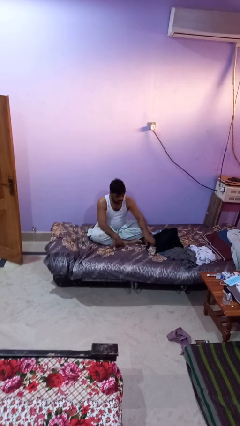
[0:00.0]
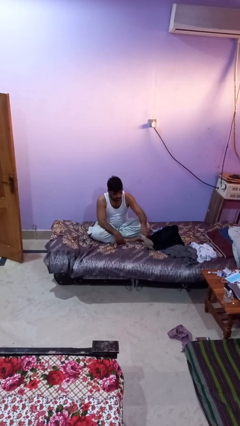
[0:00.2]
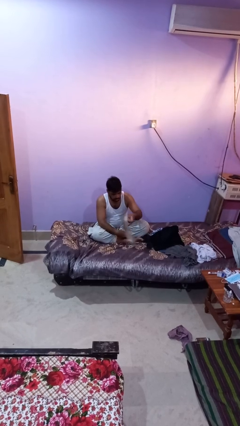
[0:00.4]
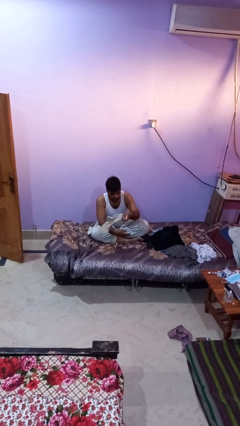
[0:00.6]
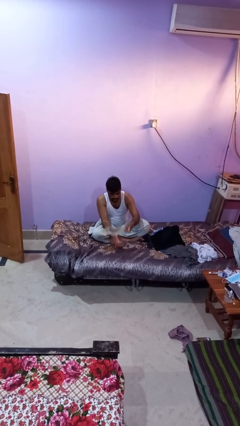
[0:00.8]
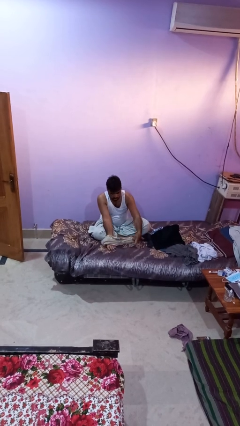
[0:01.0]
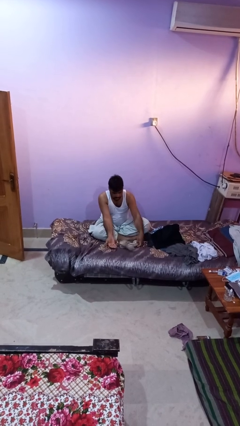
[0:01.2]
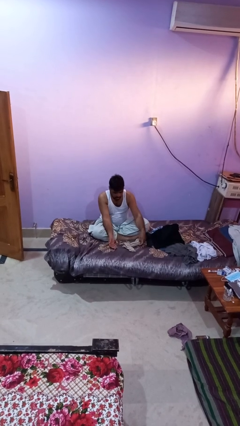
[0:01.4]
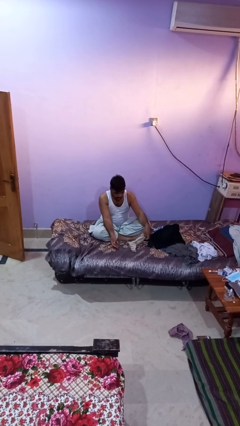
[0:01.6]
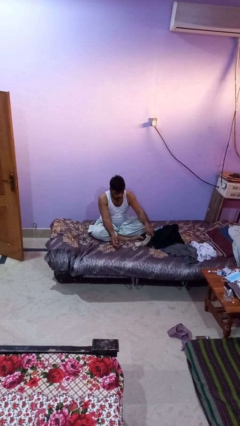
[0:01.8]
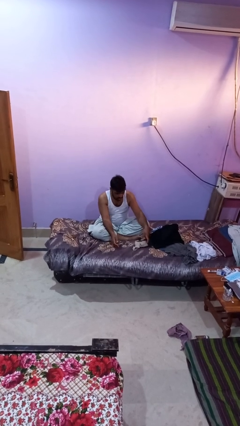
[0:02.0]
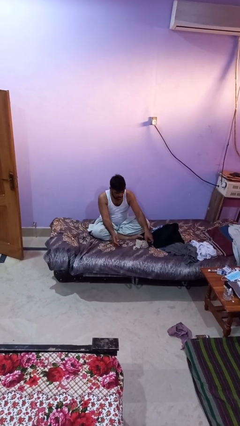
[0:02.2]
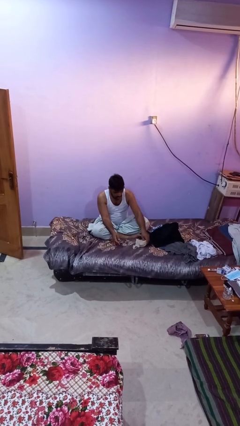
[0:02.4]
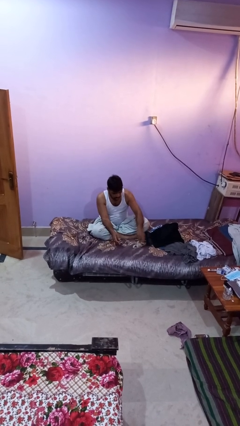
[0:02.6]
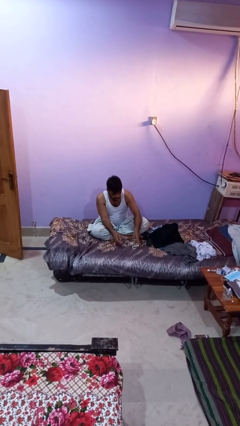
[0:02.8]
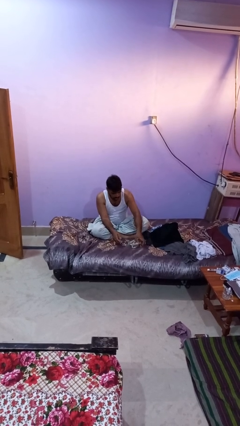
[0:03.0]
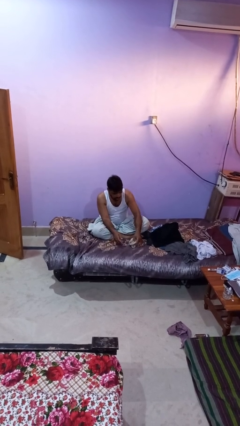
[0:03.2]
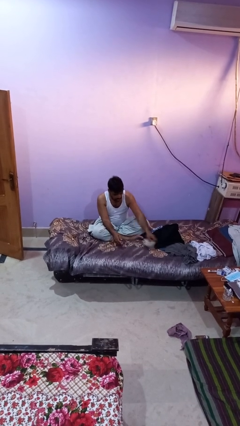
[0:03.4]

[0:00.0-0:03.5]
person folds socks

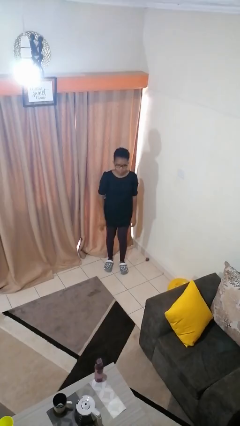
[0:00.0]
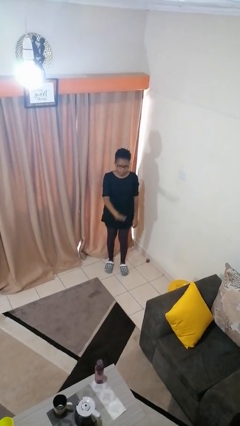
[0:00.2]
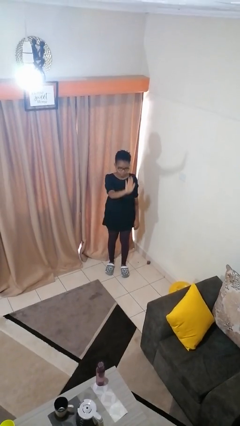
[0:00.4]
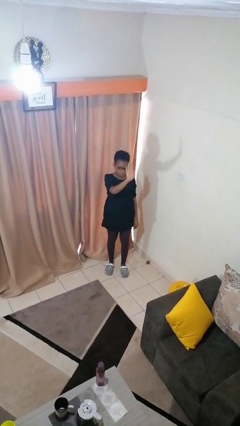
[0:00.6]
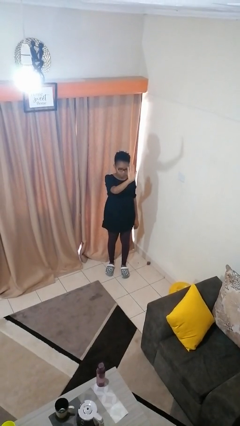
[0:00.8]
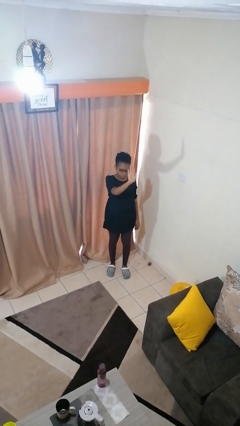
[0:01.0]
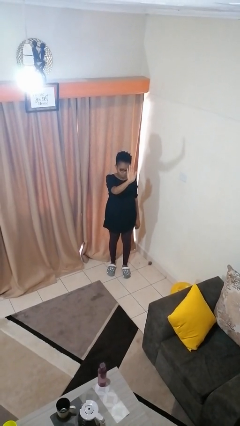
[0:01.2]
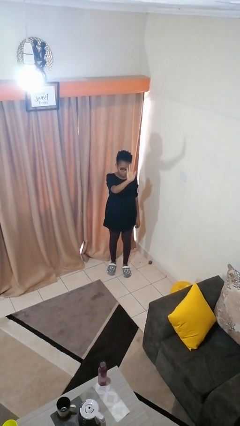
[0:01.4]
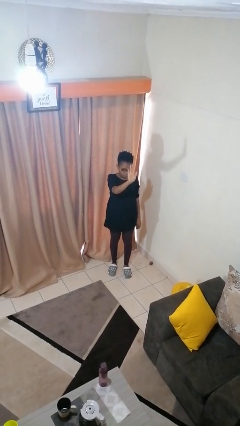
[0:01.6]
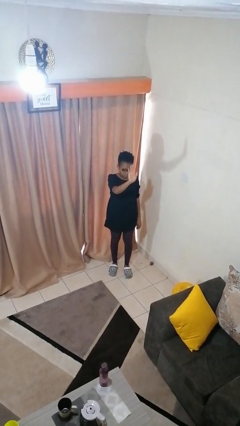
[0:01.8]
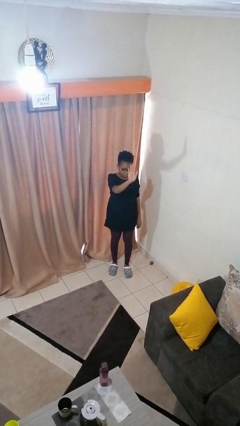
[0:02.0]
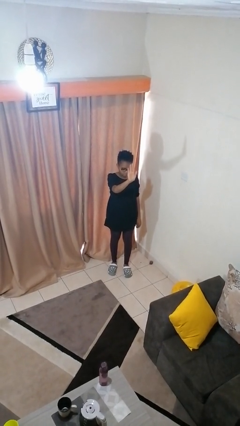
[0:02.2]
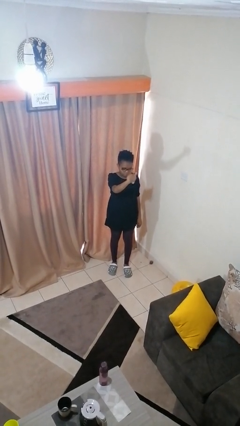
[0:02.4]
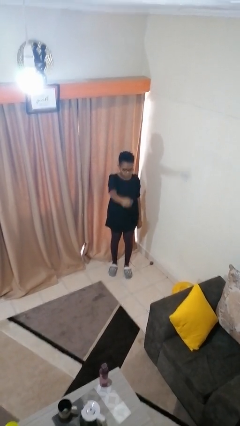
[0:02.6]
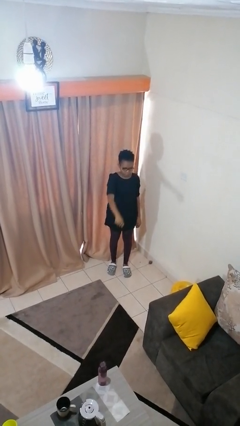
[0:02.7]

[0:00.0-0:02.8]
person gestures stop

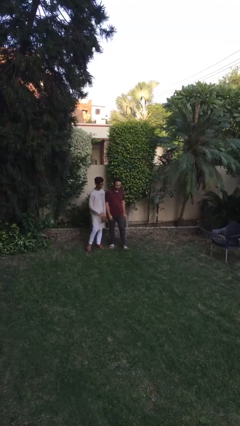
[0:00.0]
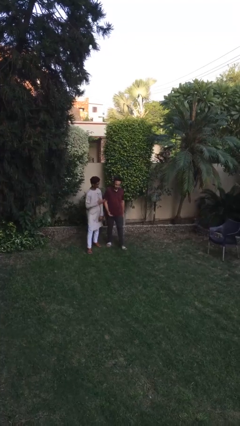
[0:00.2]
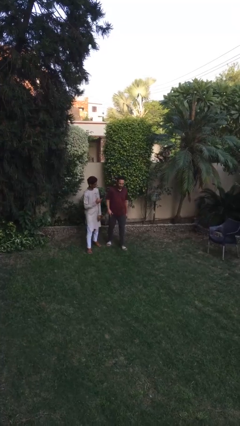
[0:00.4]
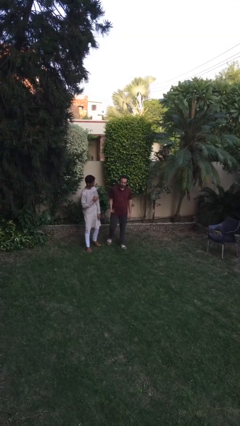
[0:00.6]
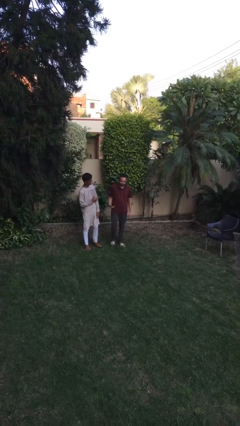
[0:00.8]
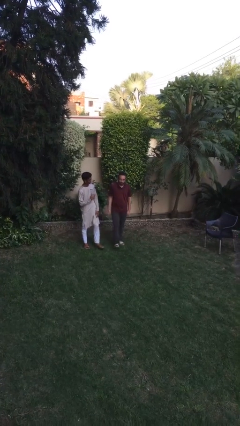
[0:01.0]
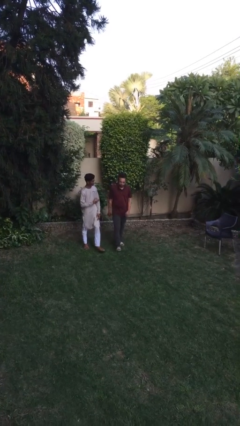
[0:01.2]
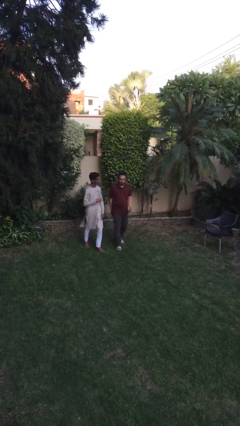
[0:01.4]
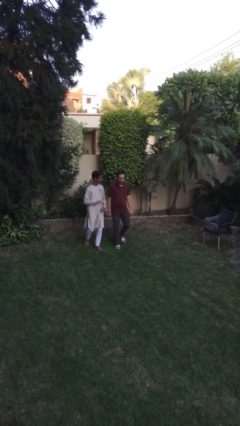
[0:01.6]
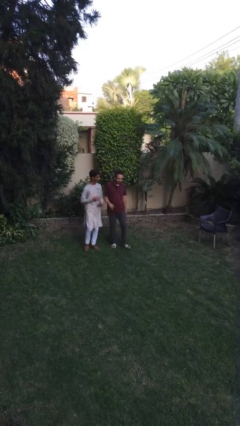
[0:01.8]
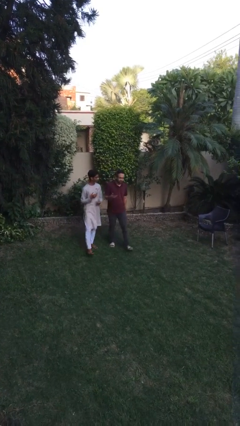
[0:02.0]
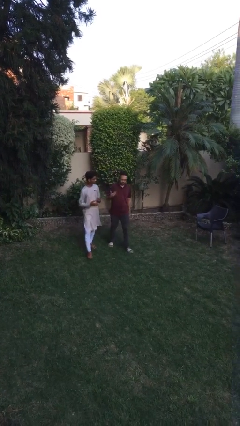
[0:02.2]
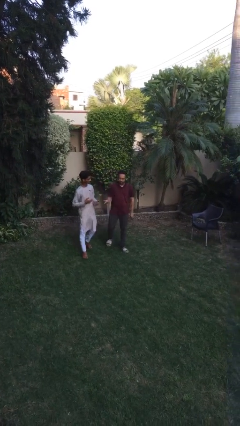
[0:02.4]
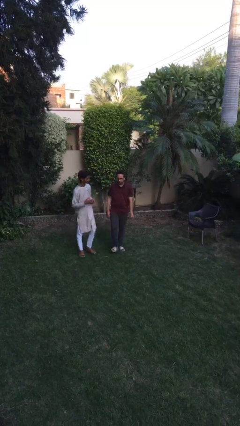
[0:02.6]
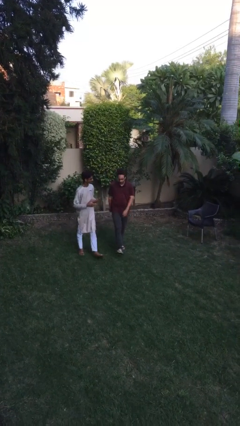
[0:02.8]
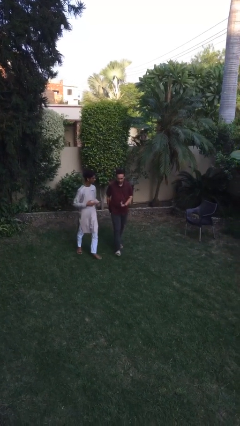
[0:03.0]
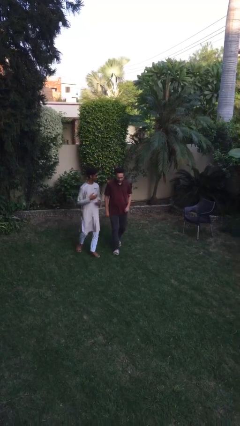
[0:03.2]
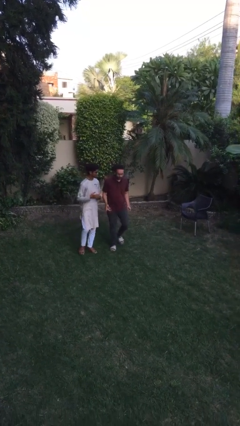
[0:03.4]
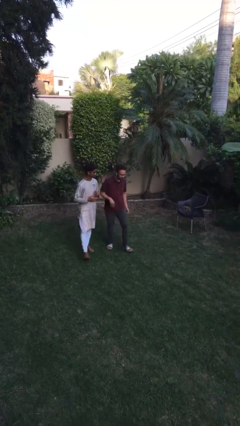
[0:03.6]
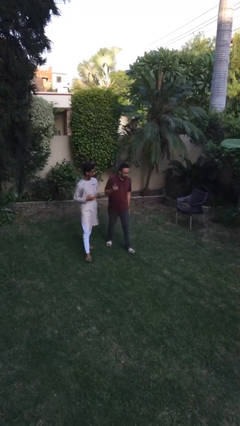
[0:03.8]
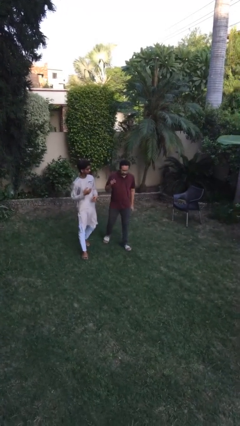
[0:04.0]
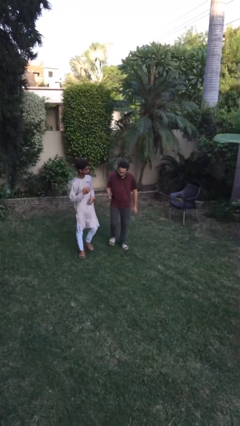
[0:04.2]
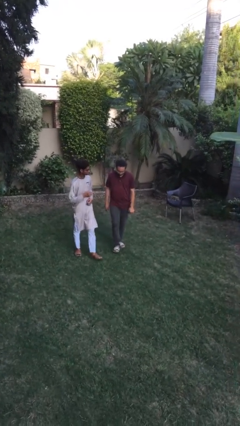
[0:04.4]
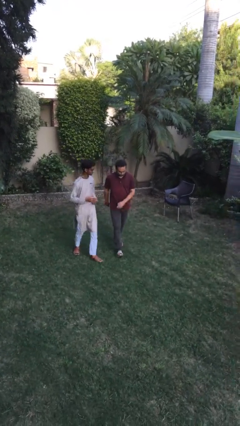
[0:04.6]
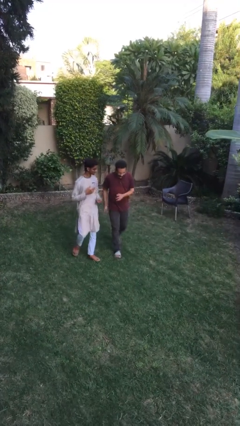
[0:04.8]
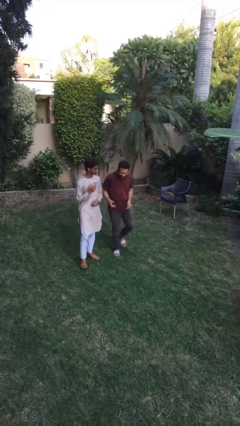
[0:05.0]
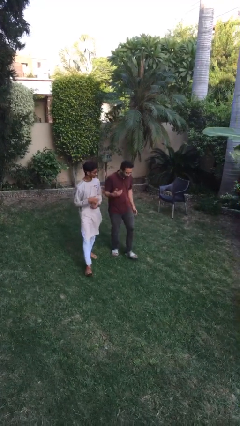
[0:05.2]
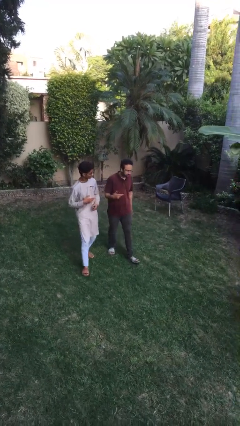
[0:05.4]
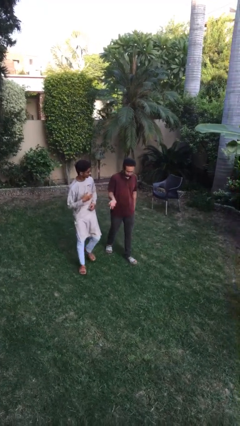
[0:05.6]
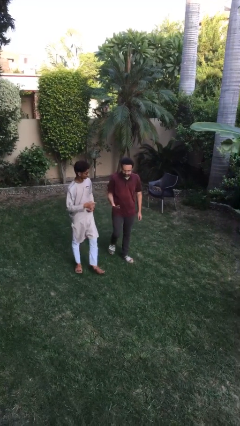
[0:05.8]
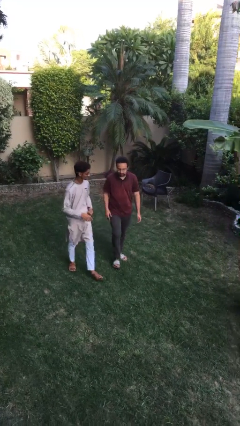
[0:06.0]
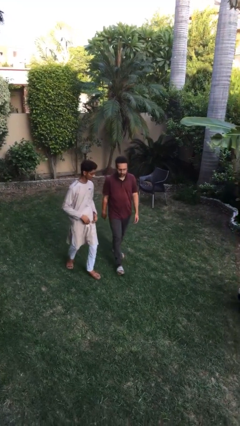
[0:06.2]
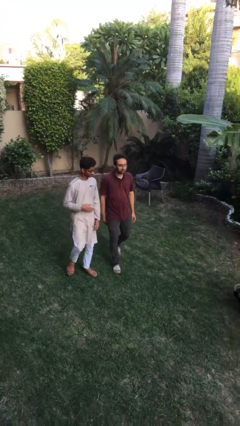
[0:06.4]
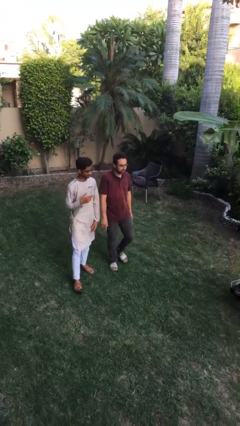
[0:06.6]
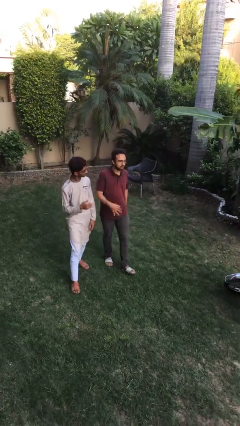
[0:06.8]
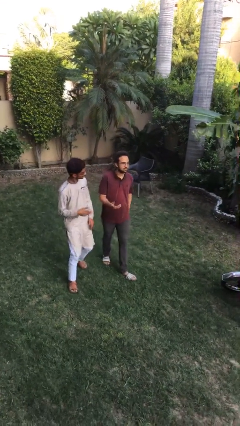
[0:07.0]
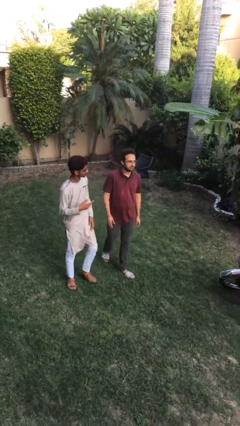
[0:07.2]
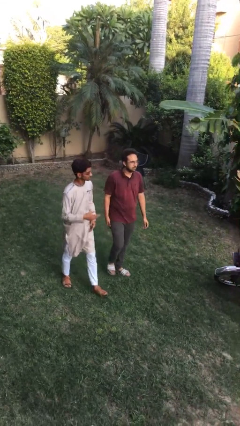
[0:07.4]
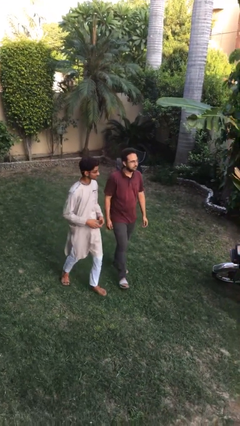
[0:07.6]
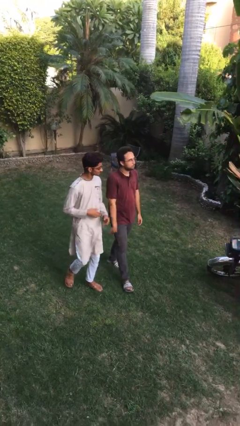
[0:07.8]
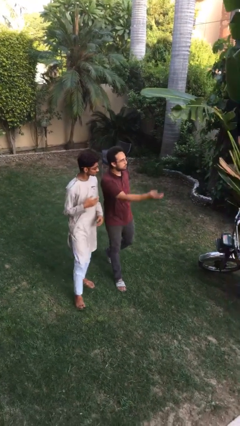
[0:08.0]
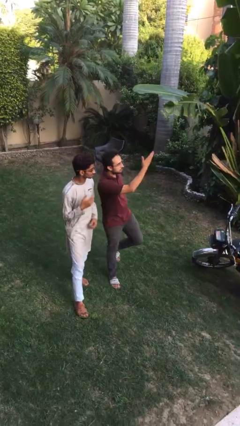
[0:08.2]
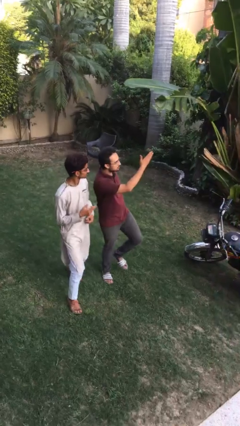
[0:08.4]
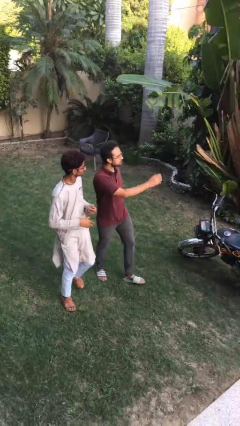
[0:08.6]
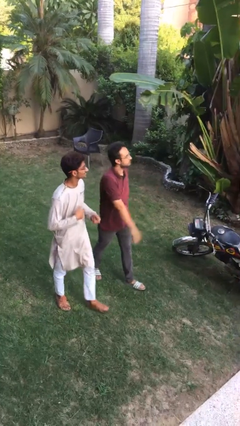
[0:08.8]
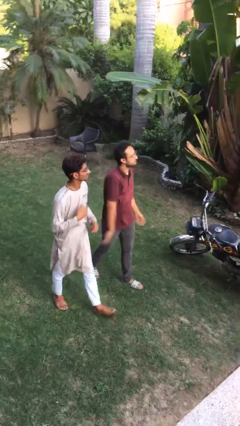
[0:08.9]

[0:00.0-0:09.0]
person talks to person

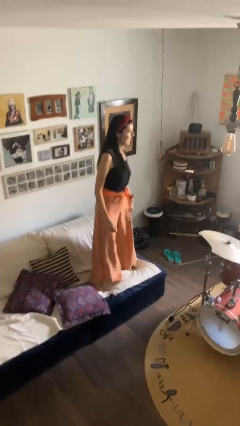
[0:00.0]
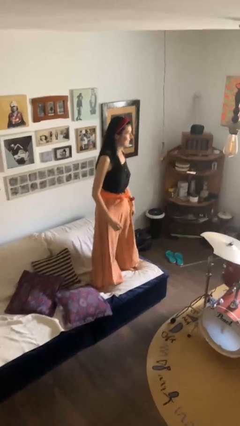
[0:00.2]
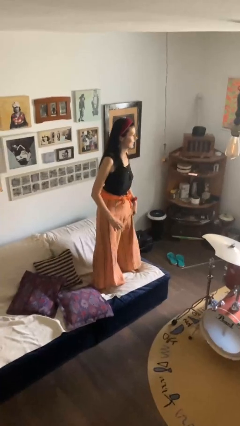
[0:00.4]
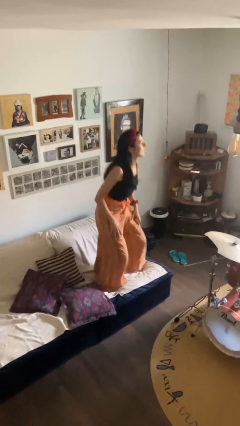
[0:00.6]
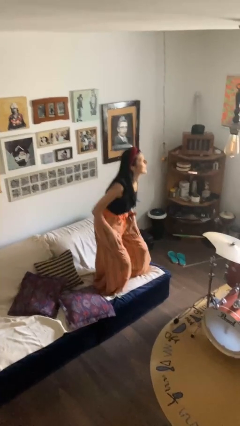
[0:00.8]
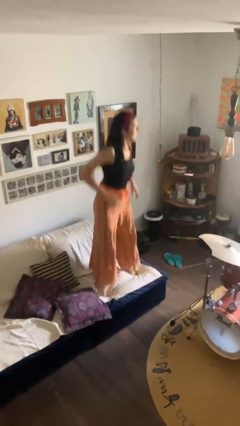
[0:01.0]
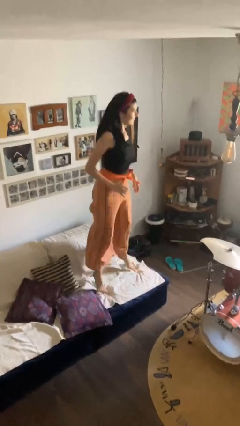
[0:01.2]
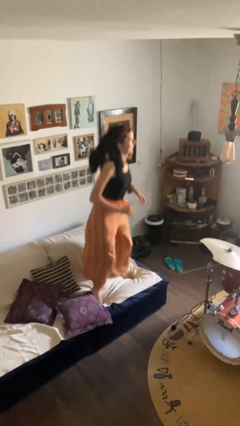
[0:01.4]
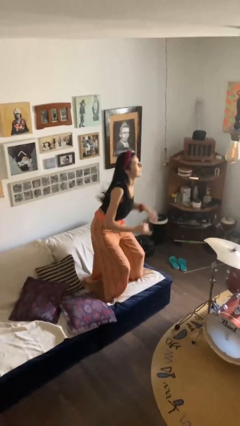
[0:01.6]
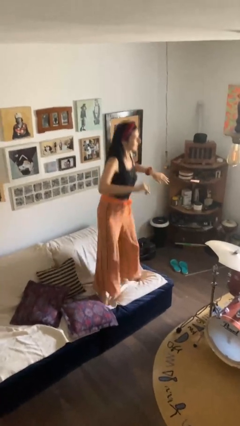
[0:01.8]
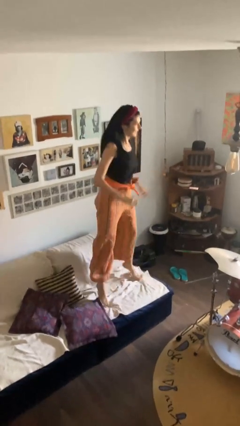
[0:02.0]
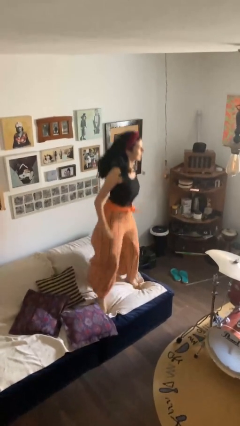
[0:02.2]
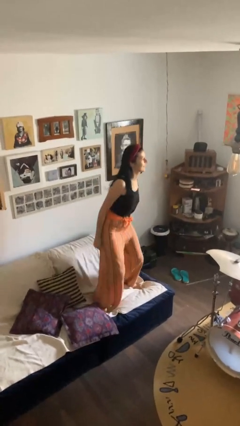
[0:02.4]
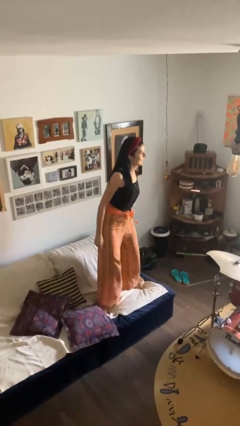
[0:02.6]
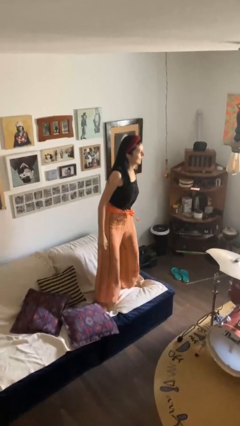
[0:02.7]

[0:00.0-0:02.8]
person jumps on couch

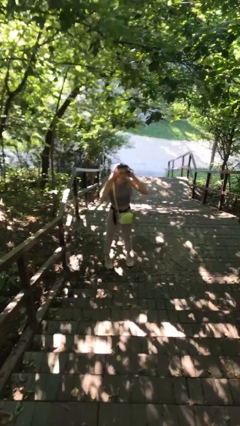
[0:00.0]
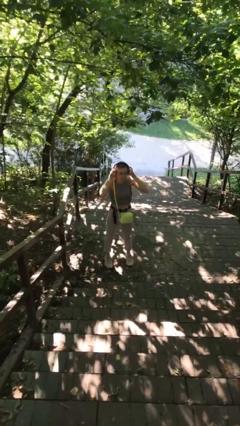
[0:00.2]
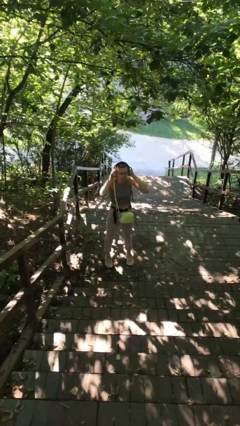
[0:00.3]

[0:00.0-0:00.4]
person puts on headphones
